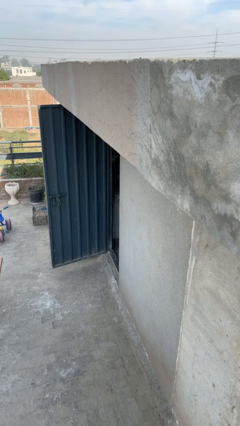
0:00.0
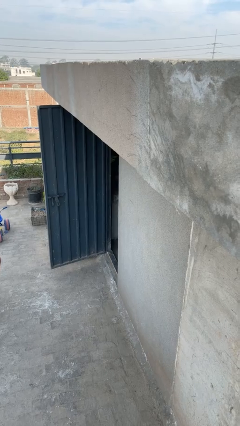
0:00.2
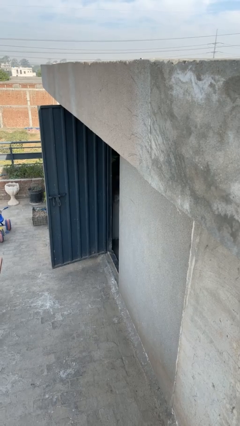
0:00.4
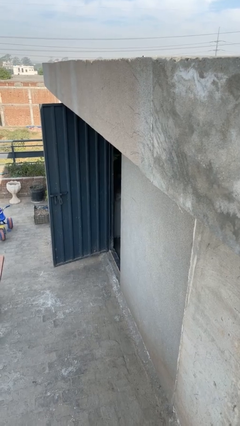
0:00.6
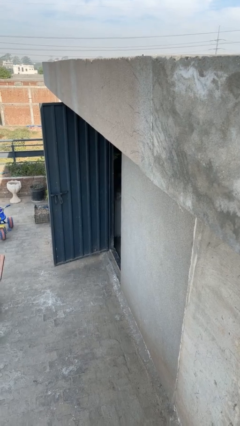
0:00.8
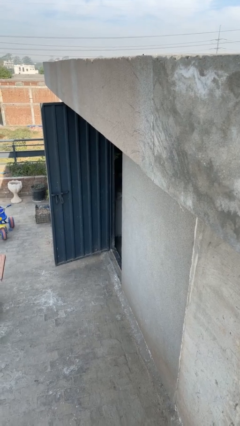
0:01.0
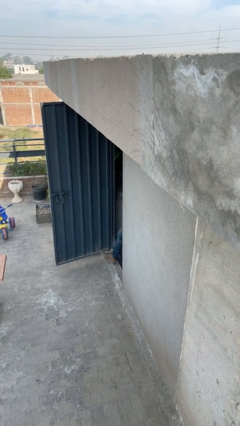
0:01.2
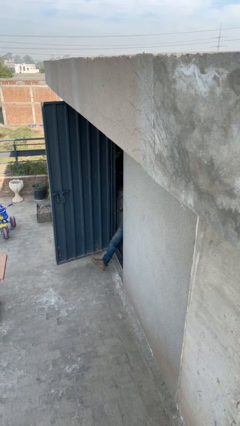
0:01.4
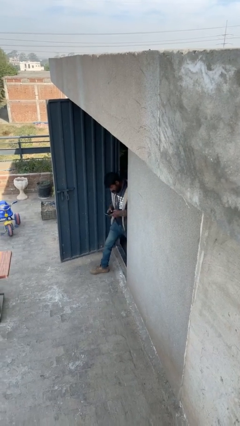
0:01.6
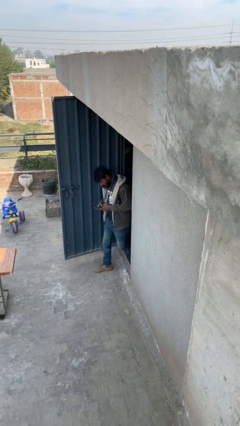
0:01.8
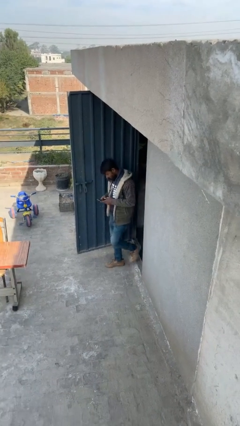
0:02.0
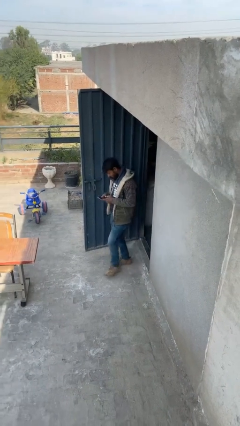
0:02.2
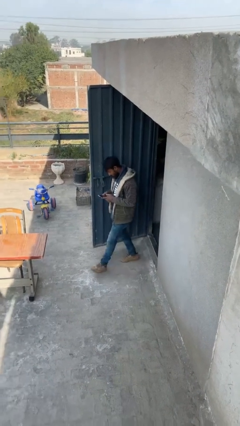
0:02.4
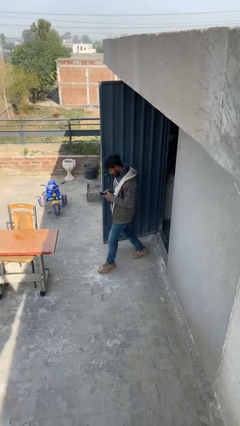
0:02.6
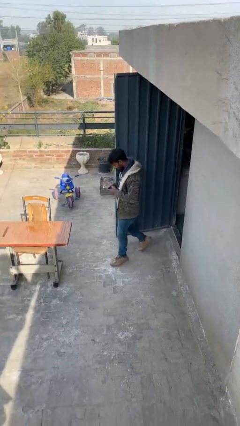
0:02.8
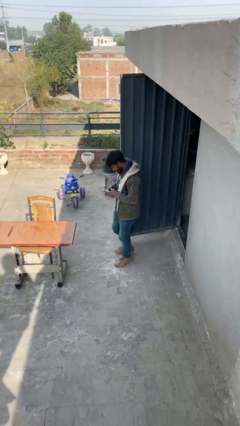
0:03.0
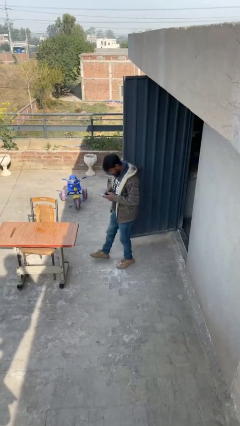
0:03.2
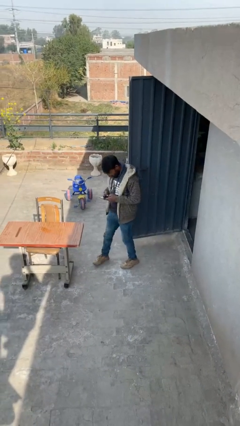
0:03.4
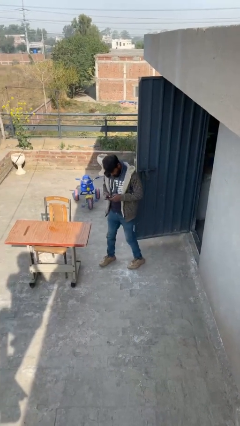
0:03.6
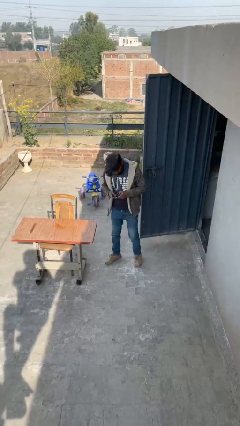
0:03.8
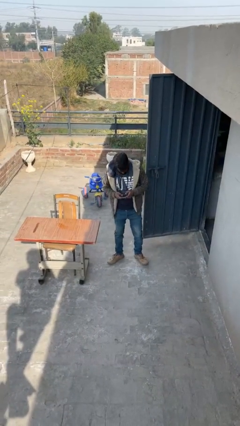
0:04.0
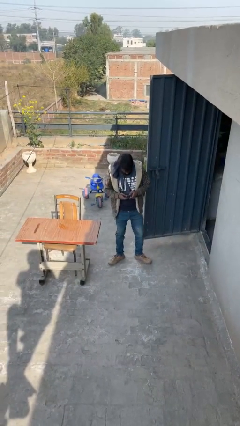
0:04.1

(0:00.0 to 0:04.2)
person enters scene through structure

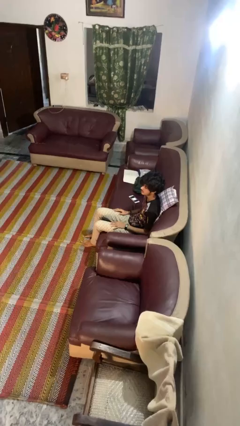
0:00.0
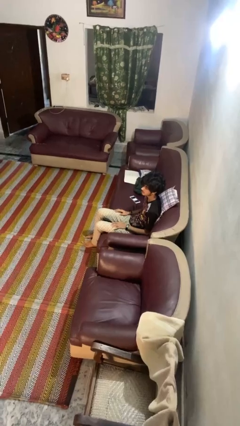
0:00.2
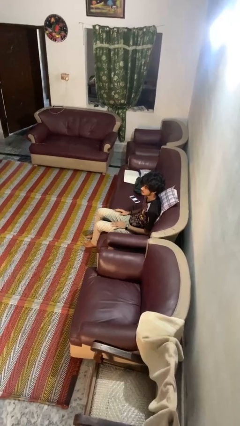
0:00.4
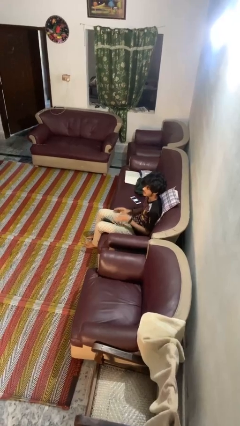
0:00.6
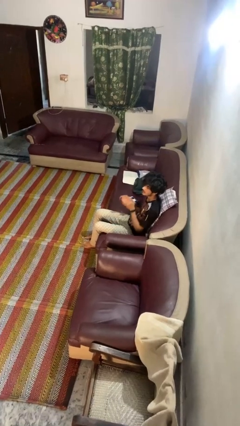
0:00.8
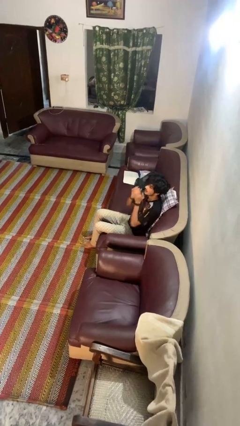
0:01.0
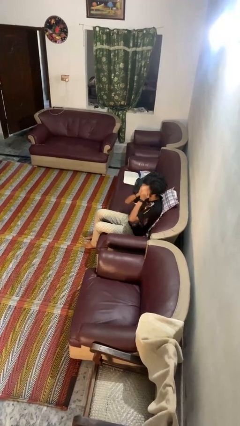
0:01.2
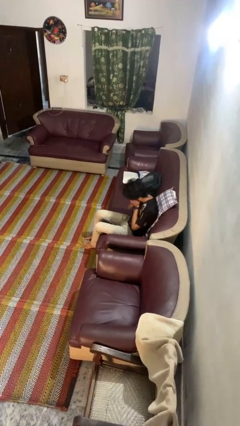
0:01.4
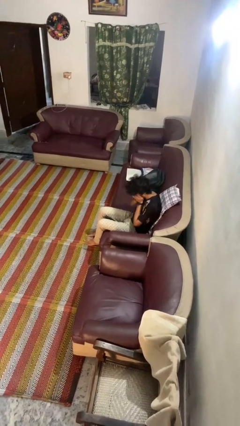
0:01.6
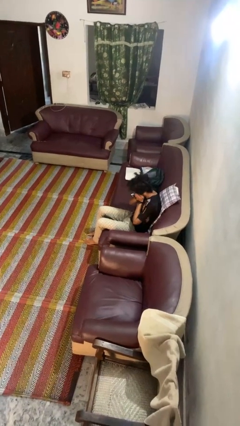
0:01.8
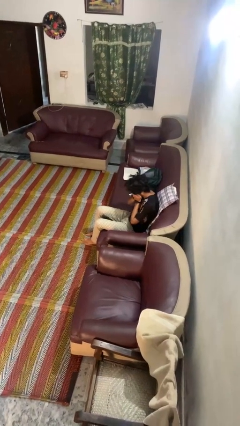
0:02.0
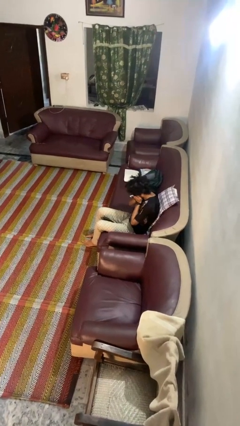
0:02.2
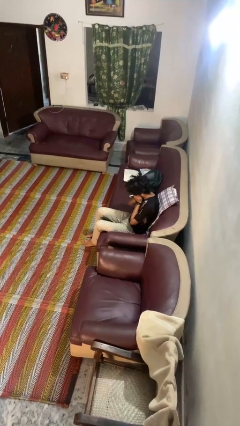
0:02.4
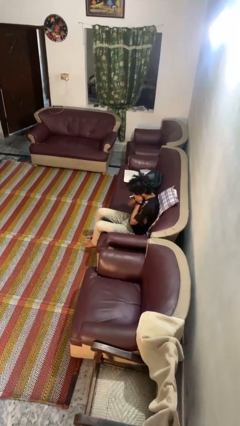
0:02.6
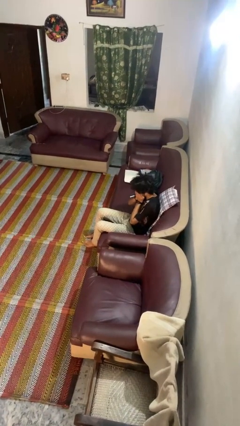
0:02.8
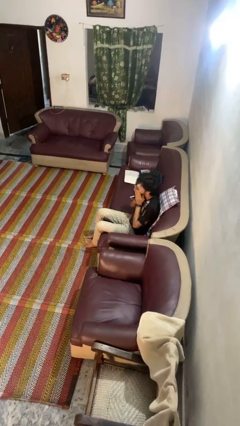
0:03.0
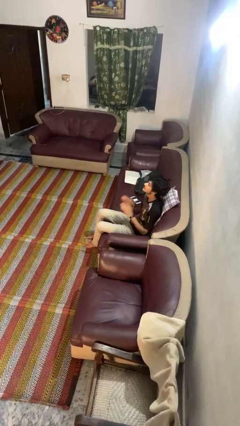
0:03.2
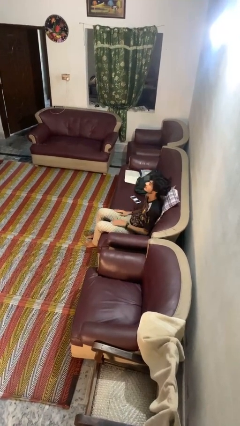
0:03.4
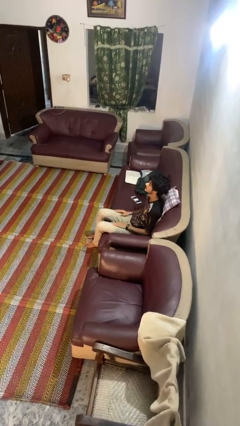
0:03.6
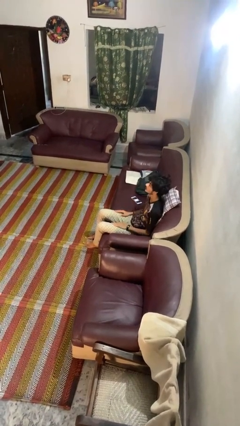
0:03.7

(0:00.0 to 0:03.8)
person sneezes into hand

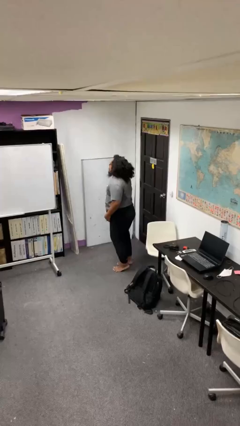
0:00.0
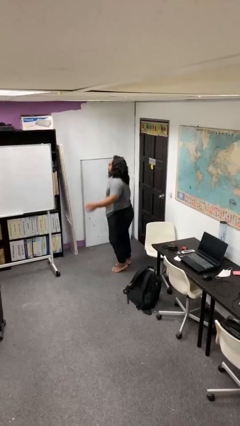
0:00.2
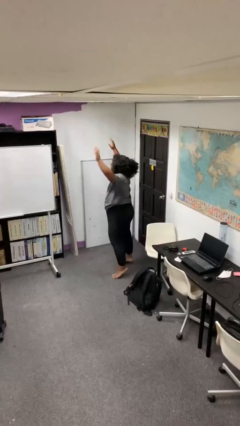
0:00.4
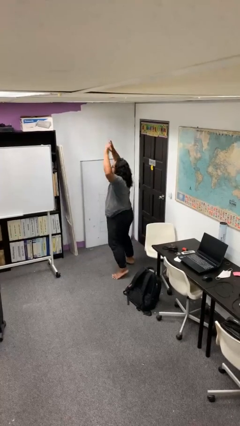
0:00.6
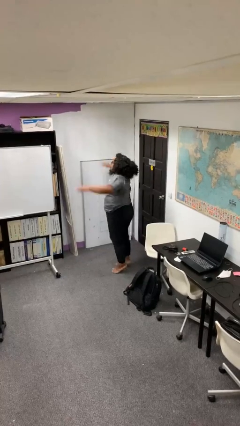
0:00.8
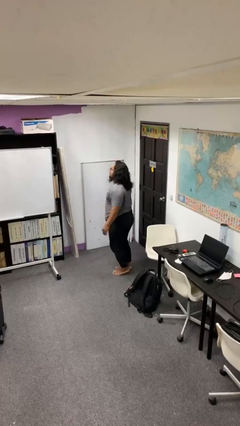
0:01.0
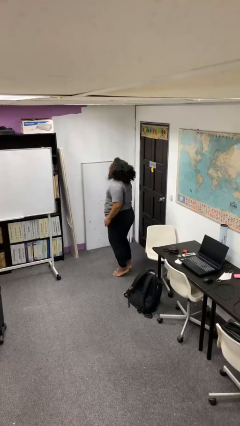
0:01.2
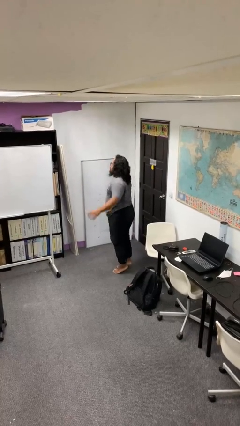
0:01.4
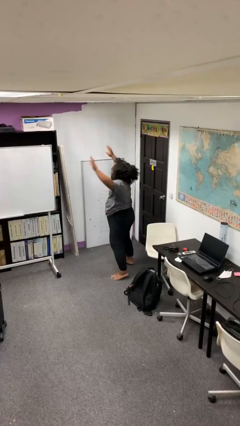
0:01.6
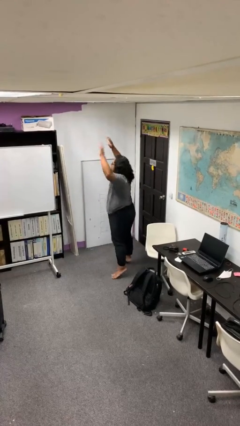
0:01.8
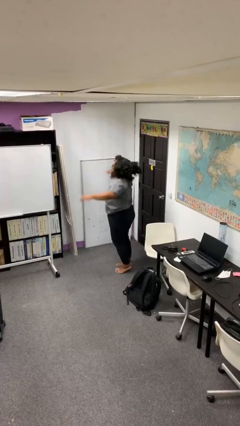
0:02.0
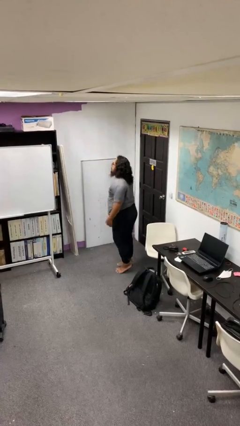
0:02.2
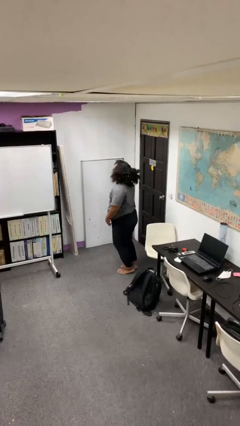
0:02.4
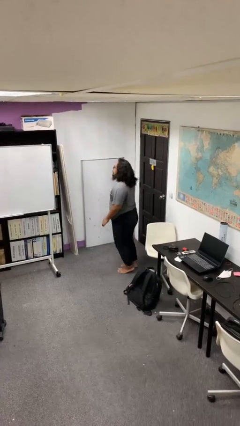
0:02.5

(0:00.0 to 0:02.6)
person exercises with jumping jacks

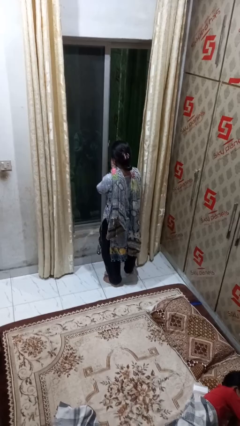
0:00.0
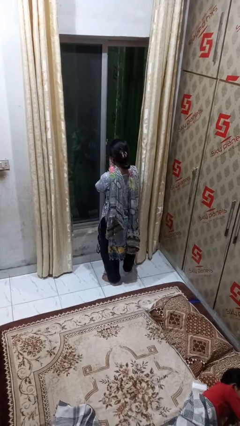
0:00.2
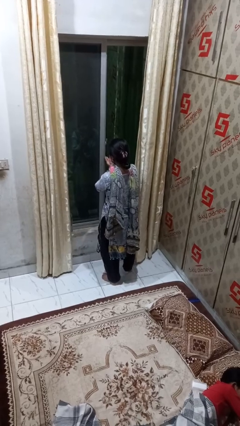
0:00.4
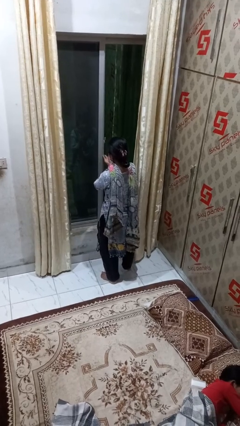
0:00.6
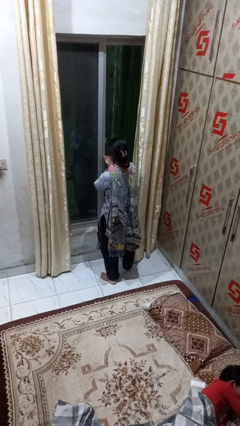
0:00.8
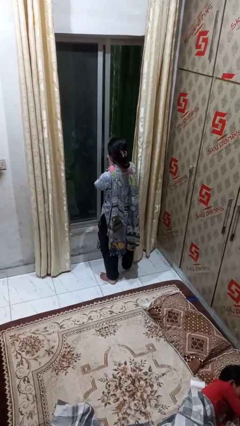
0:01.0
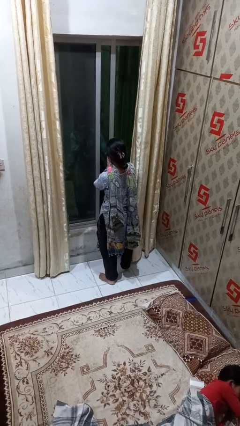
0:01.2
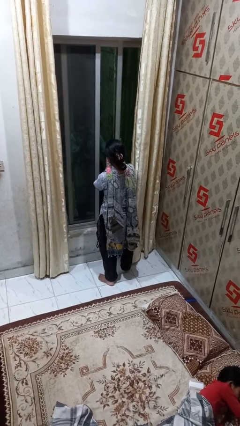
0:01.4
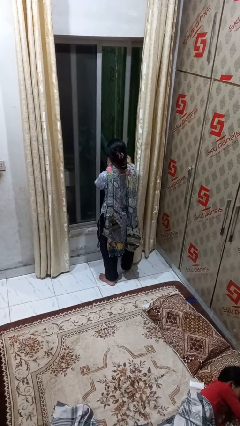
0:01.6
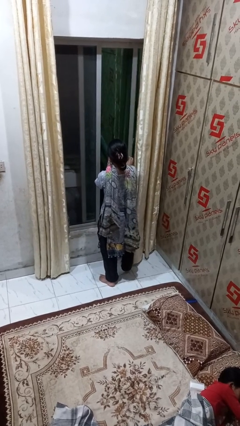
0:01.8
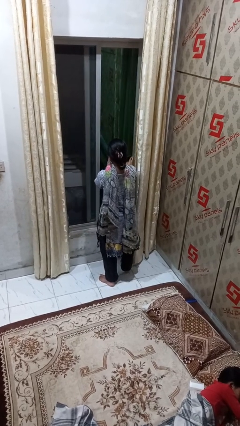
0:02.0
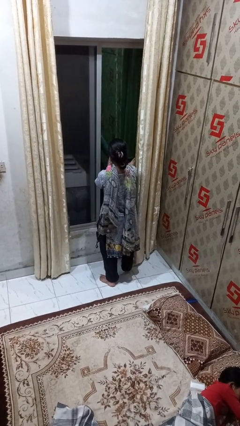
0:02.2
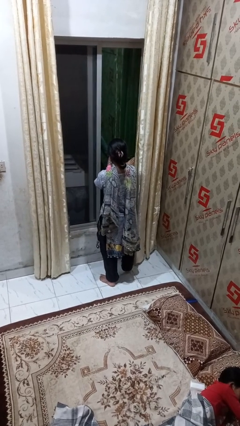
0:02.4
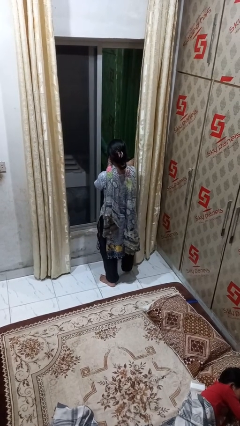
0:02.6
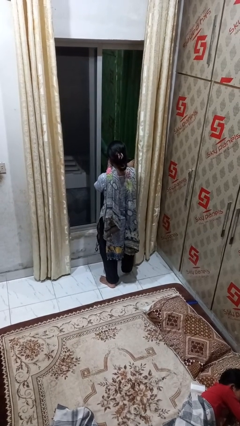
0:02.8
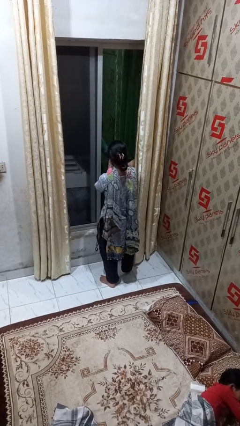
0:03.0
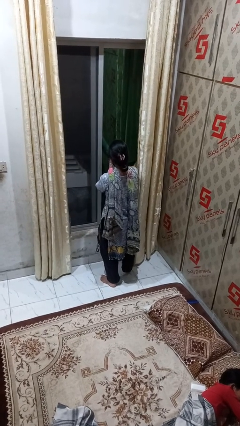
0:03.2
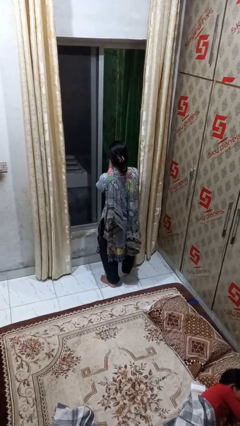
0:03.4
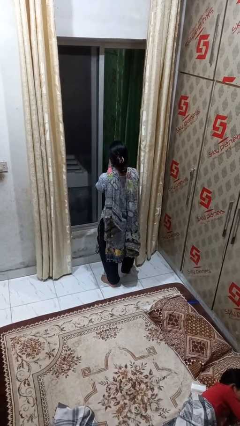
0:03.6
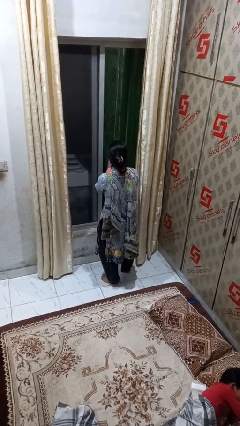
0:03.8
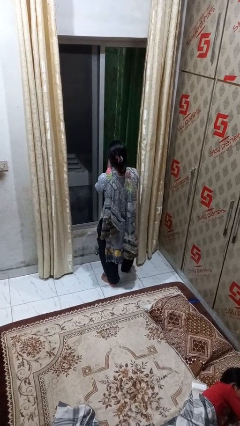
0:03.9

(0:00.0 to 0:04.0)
person opens home window

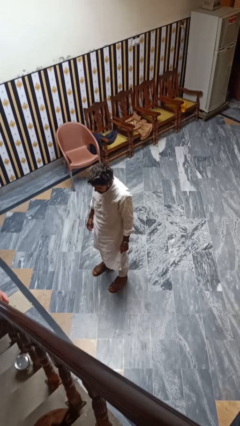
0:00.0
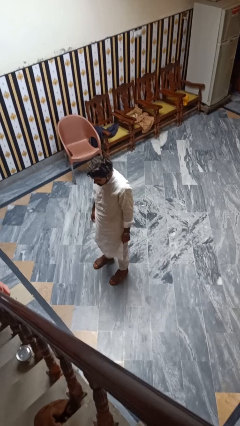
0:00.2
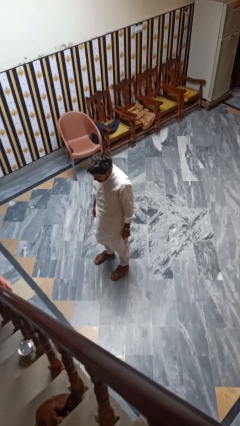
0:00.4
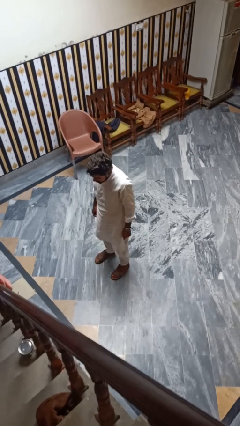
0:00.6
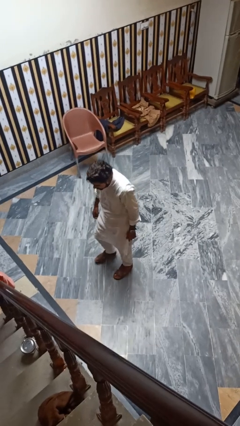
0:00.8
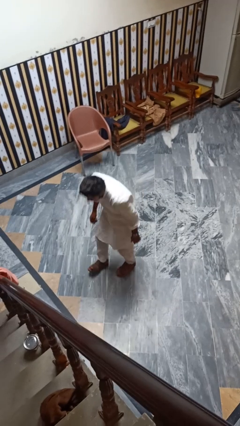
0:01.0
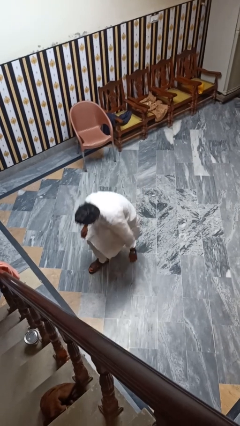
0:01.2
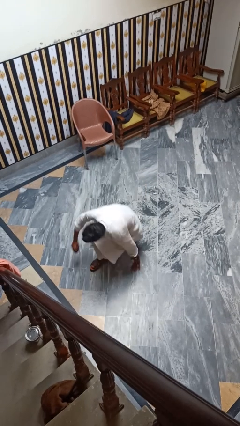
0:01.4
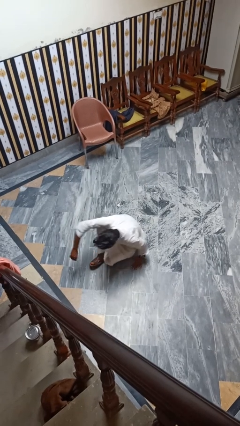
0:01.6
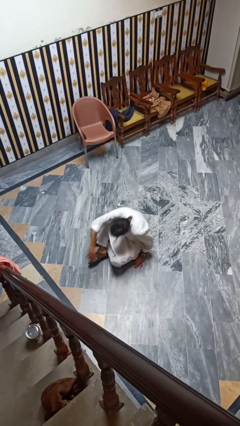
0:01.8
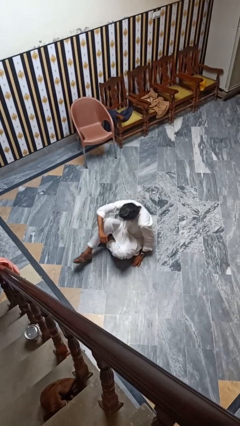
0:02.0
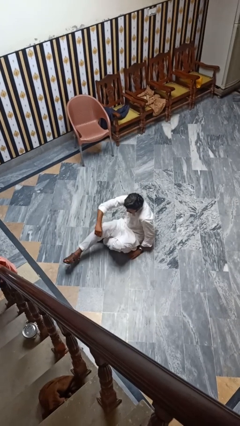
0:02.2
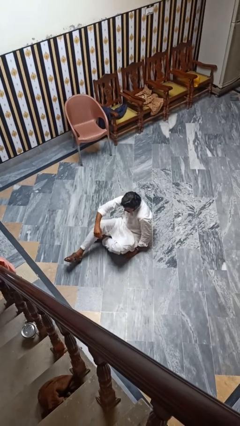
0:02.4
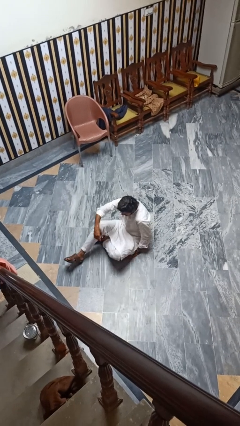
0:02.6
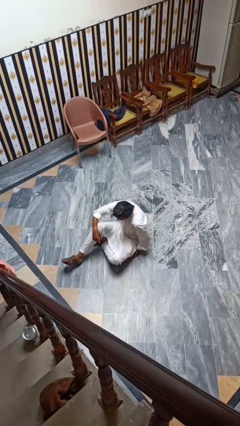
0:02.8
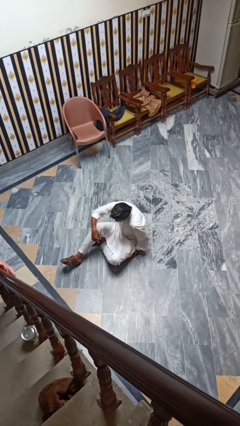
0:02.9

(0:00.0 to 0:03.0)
person falls while standing

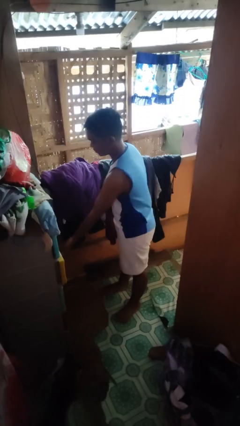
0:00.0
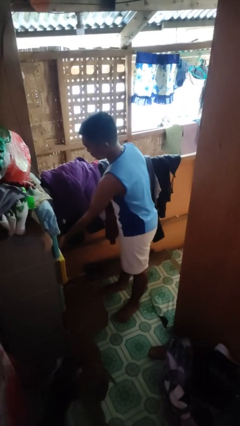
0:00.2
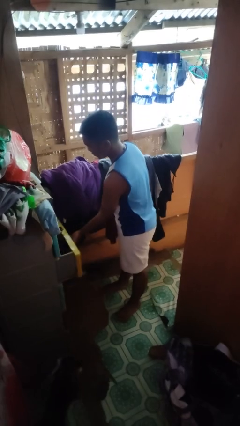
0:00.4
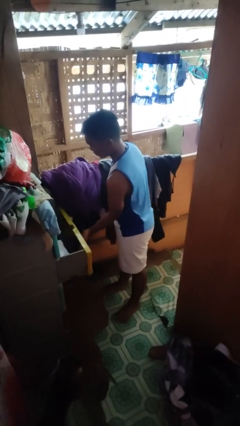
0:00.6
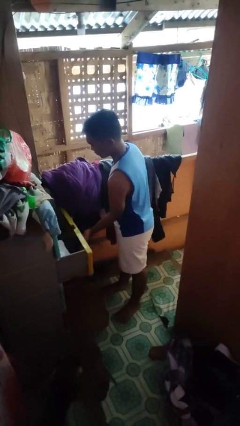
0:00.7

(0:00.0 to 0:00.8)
person opens dresser drawer
